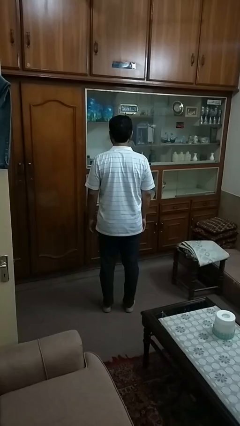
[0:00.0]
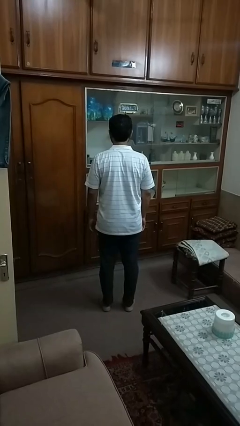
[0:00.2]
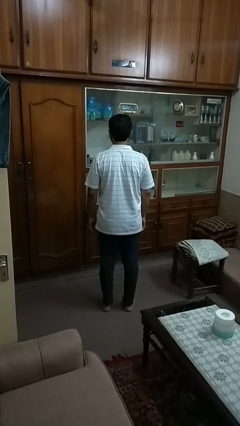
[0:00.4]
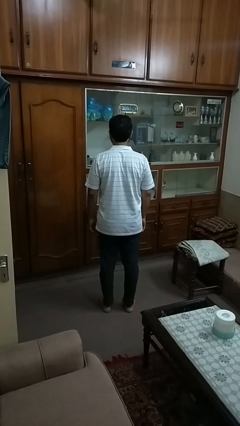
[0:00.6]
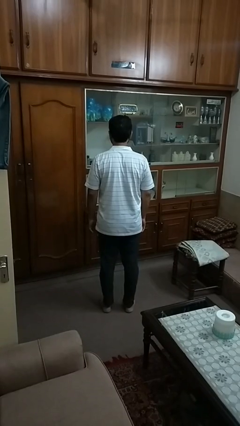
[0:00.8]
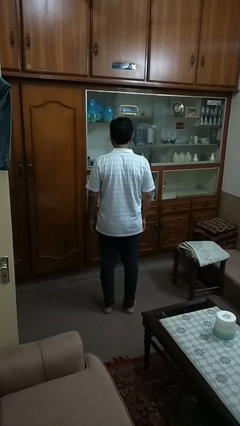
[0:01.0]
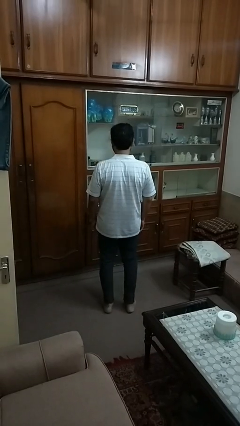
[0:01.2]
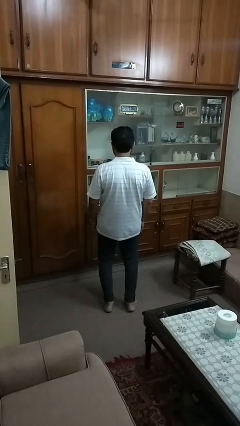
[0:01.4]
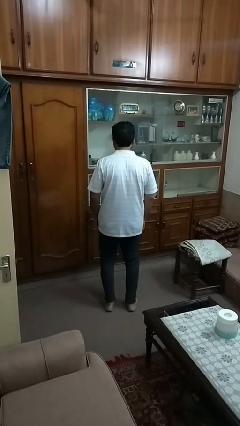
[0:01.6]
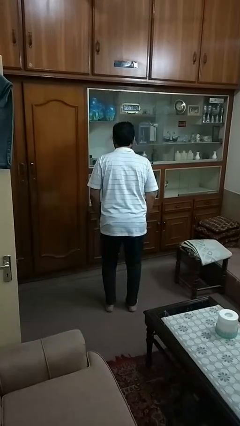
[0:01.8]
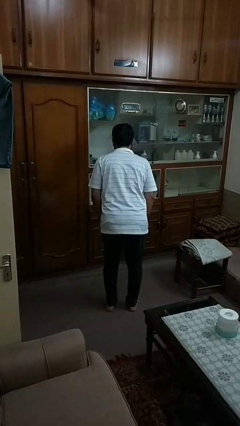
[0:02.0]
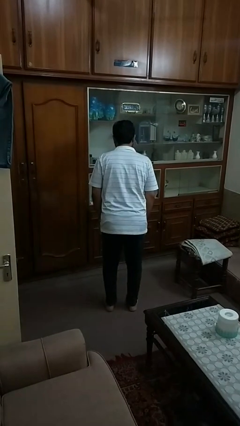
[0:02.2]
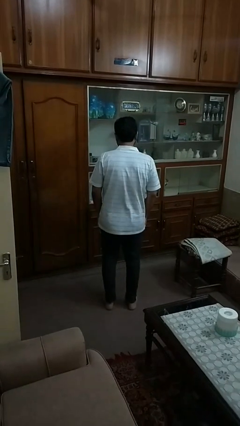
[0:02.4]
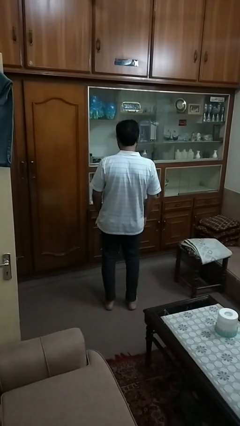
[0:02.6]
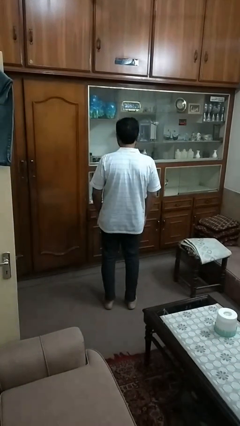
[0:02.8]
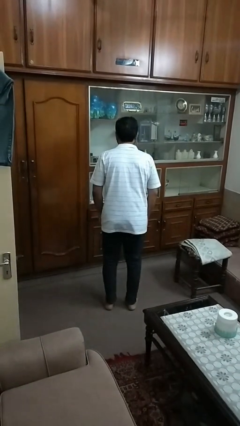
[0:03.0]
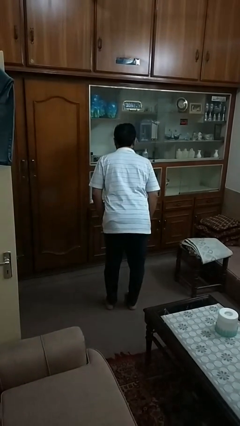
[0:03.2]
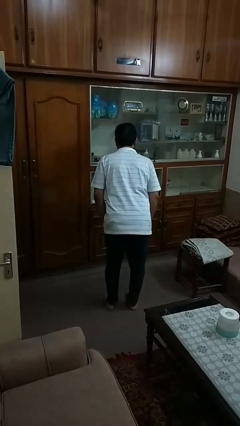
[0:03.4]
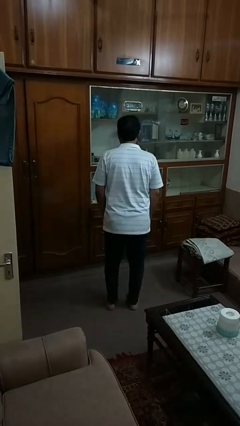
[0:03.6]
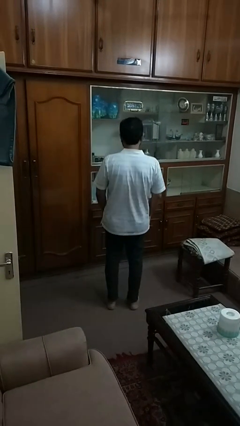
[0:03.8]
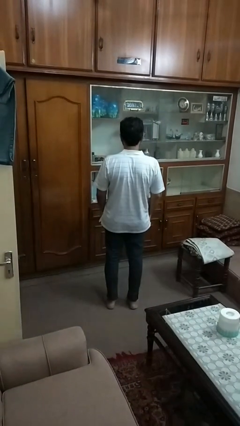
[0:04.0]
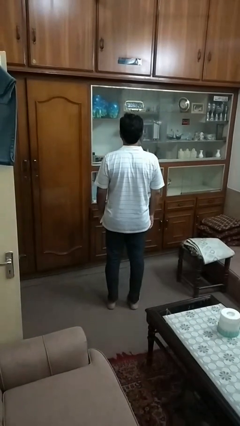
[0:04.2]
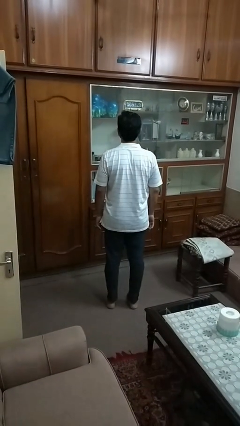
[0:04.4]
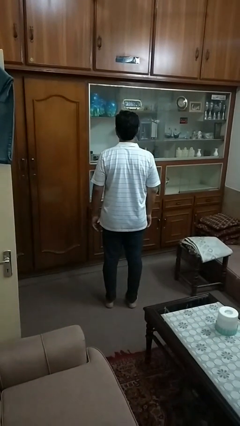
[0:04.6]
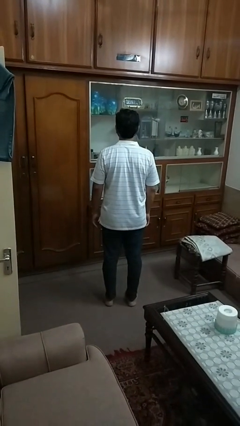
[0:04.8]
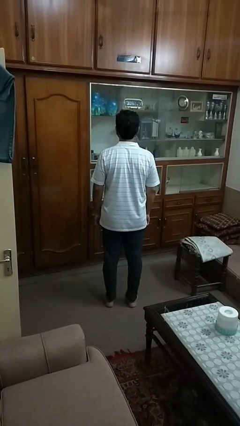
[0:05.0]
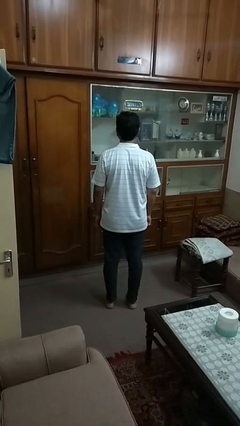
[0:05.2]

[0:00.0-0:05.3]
person wiggles hips

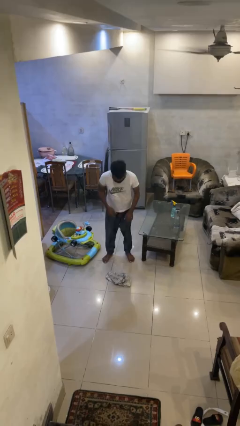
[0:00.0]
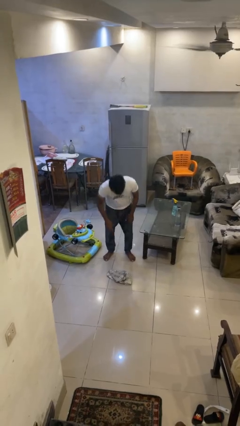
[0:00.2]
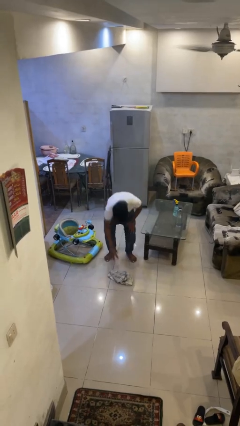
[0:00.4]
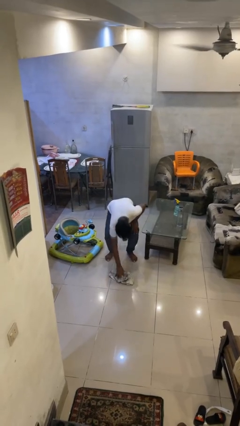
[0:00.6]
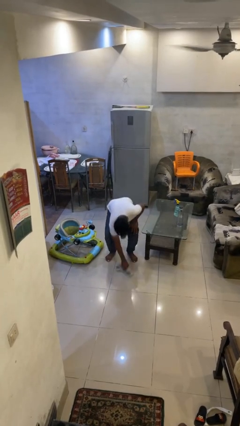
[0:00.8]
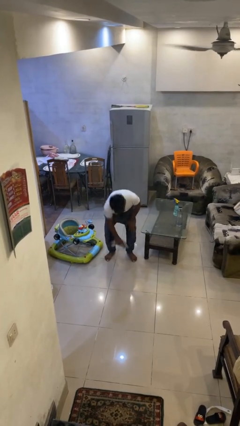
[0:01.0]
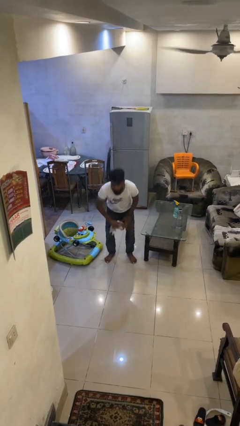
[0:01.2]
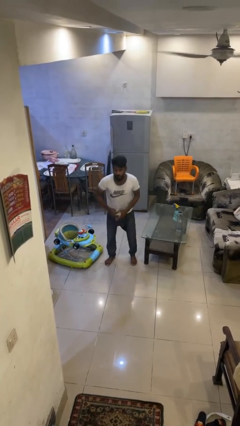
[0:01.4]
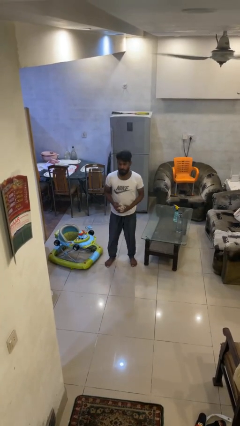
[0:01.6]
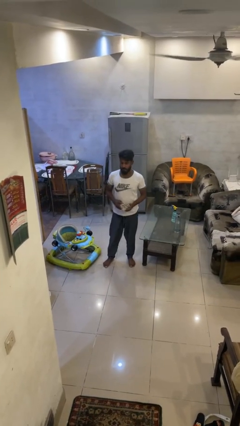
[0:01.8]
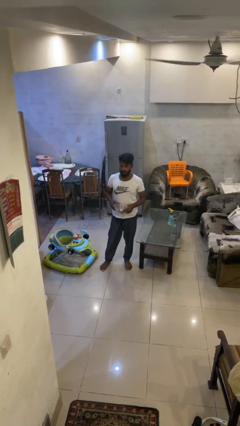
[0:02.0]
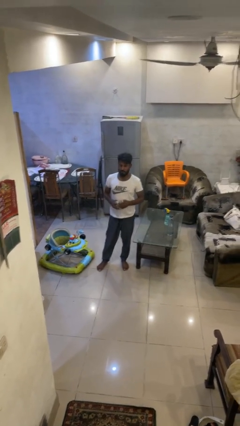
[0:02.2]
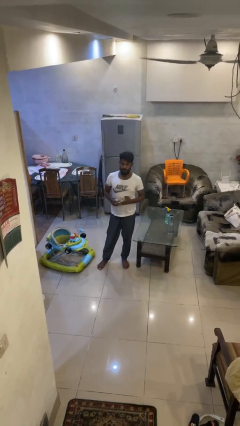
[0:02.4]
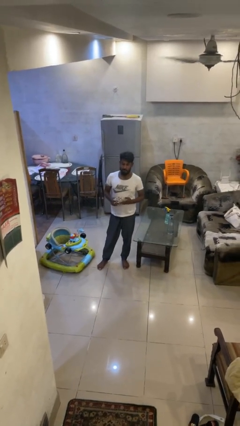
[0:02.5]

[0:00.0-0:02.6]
person picks up object from floor

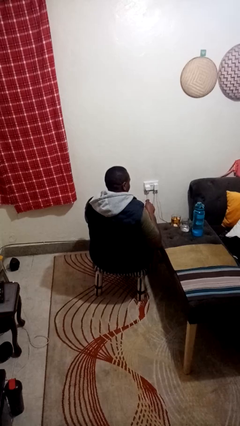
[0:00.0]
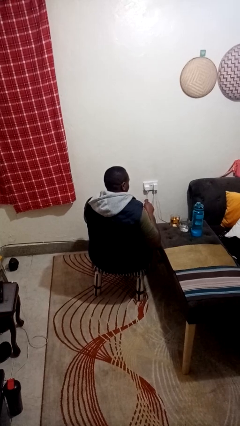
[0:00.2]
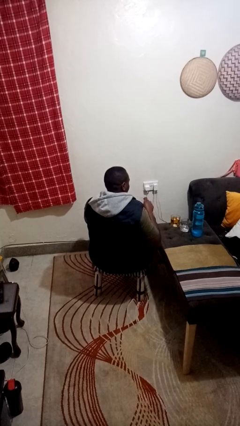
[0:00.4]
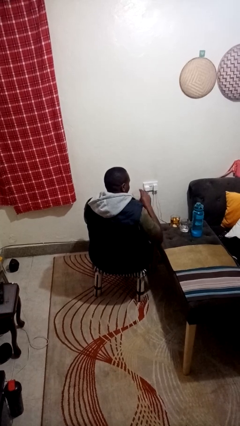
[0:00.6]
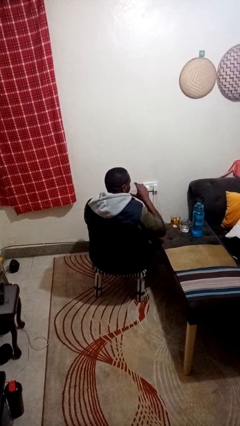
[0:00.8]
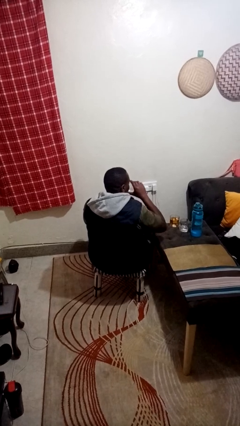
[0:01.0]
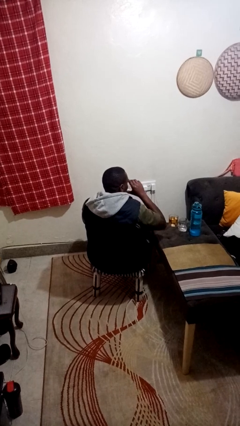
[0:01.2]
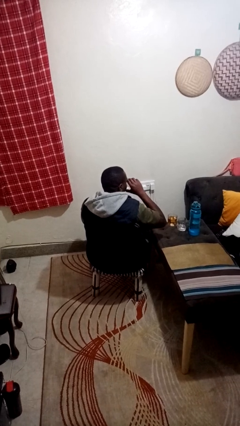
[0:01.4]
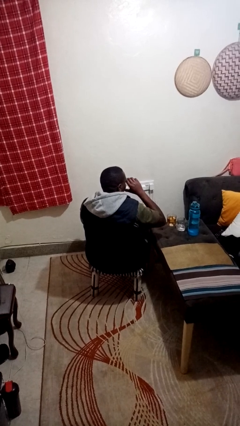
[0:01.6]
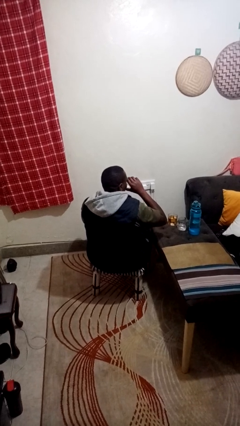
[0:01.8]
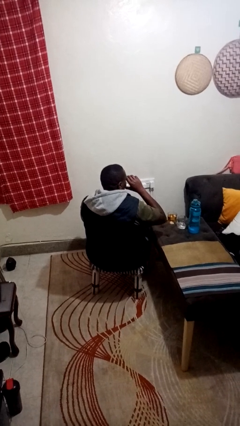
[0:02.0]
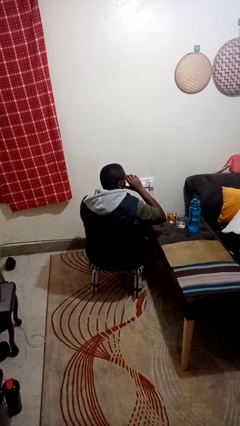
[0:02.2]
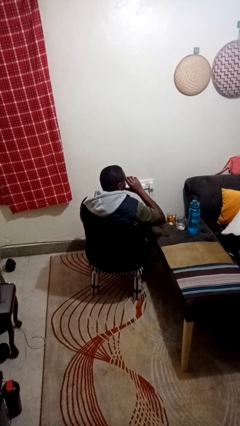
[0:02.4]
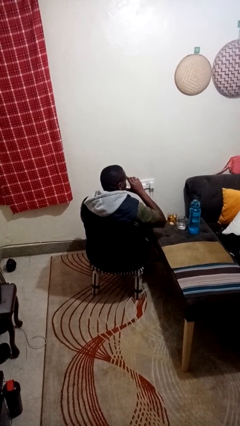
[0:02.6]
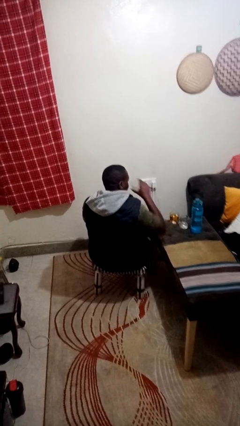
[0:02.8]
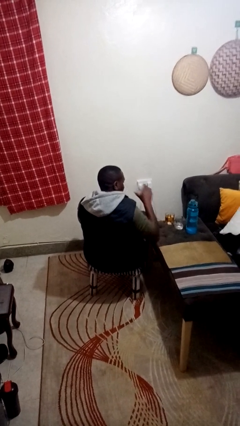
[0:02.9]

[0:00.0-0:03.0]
person drinks from shotglass

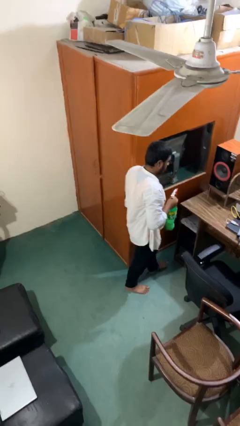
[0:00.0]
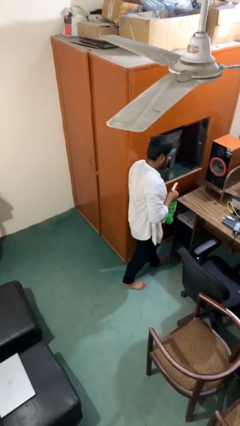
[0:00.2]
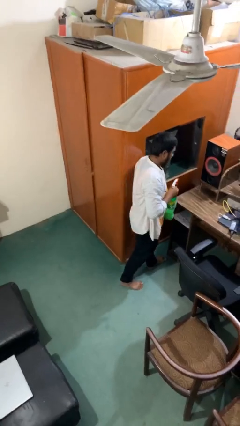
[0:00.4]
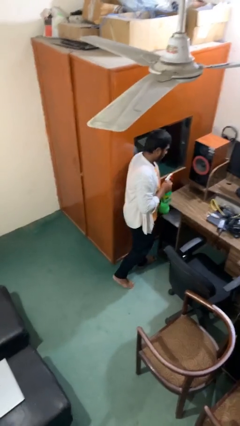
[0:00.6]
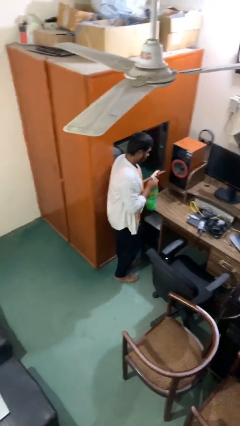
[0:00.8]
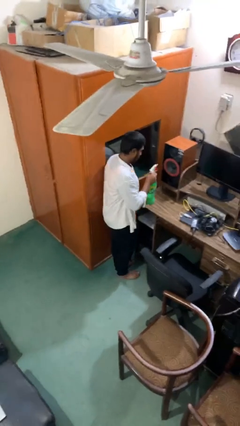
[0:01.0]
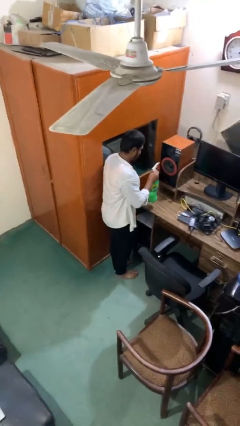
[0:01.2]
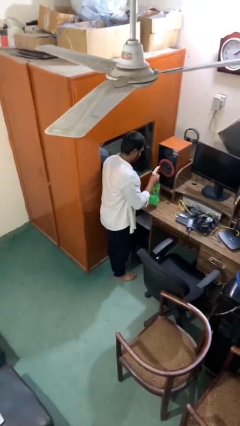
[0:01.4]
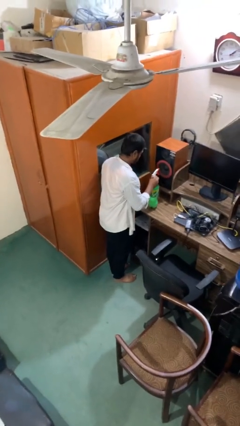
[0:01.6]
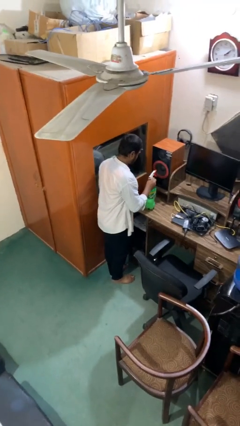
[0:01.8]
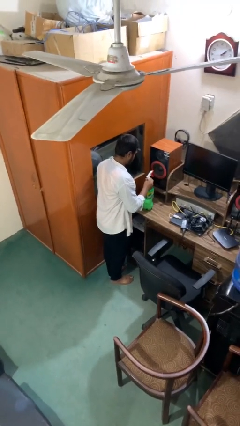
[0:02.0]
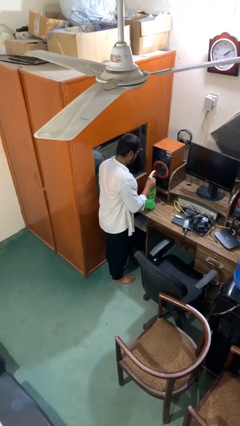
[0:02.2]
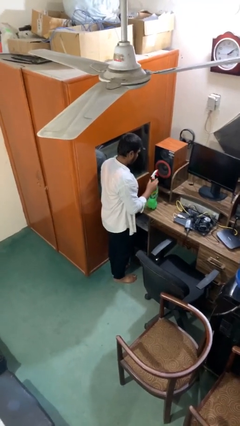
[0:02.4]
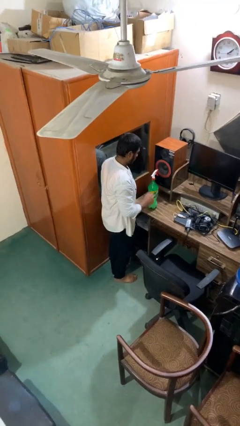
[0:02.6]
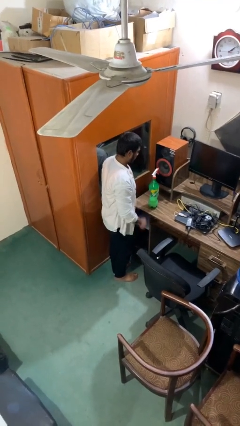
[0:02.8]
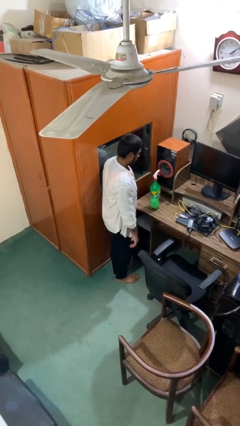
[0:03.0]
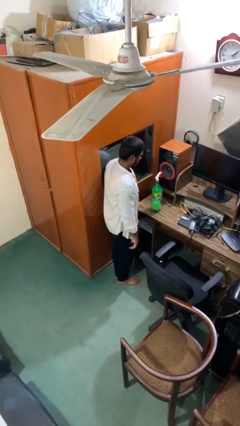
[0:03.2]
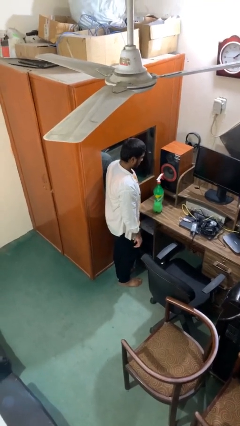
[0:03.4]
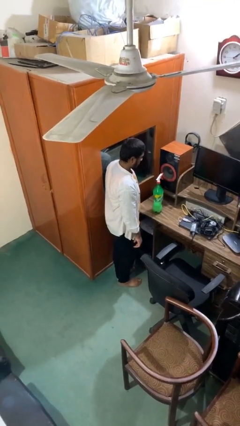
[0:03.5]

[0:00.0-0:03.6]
person puts down object on table

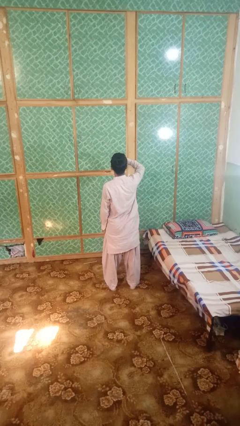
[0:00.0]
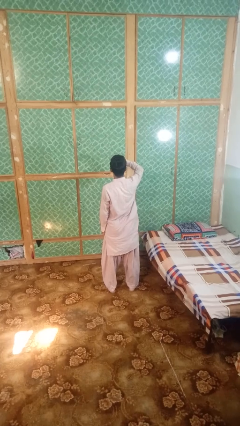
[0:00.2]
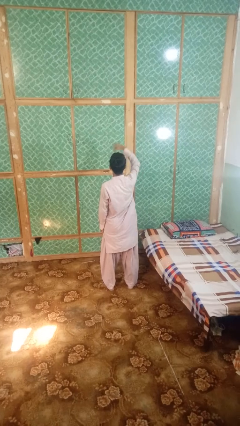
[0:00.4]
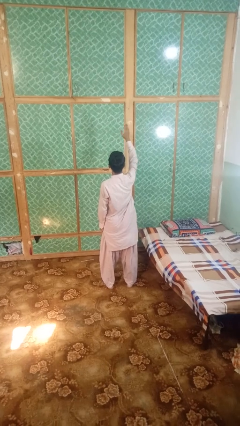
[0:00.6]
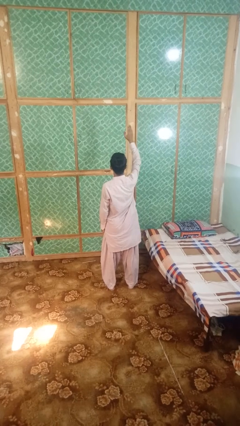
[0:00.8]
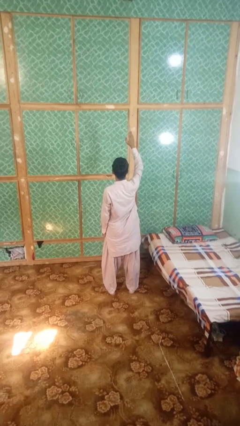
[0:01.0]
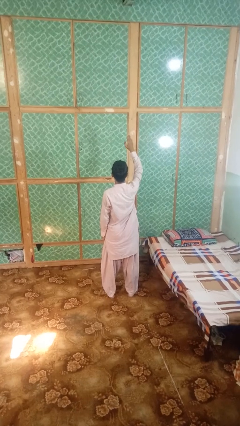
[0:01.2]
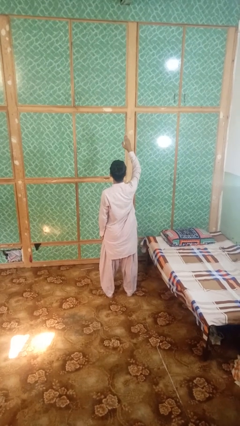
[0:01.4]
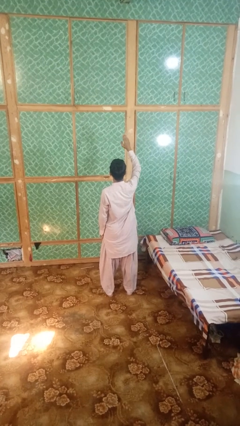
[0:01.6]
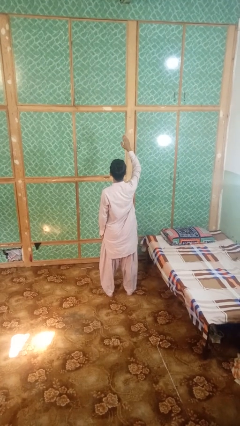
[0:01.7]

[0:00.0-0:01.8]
person gestures swipe up

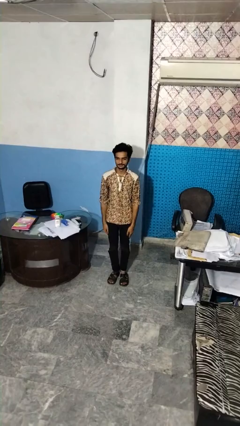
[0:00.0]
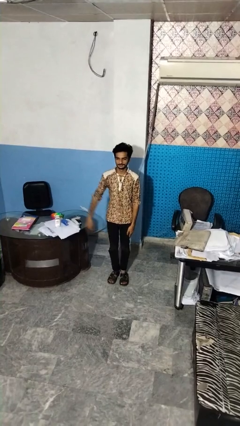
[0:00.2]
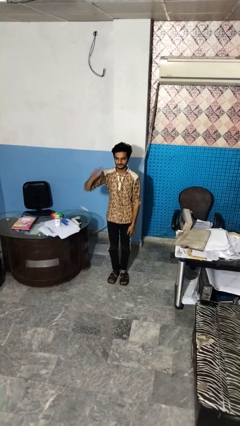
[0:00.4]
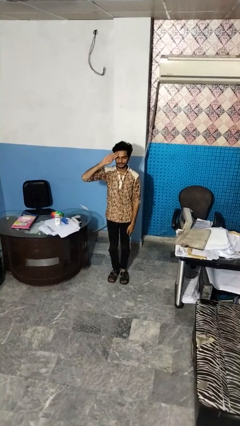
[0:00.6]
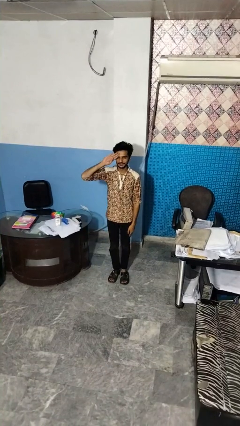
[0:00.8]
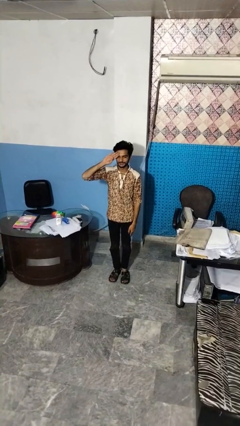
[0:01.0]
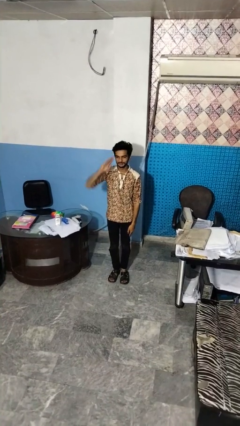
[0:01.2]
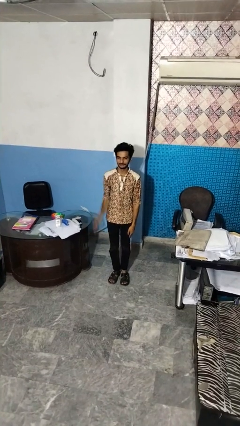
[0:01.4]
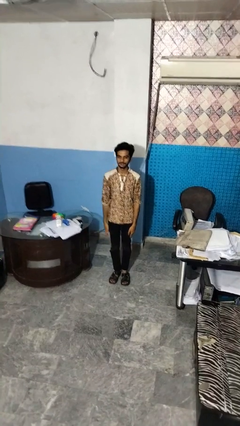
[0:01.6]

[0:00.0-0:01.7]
person salutes
